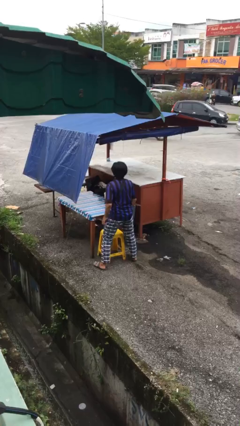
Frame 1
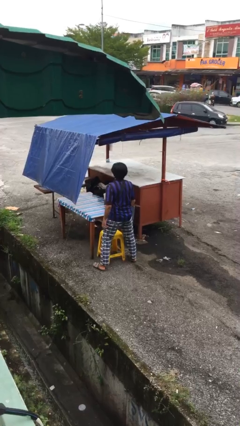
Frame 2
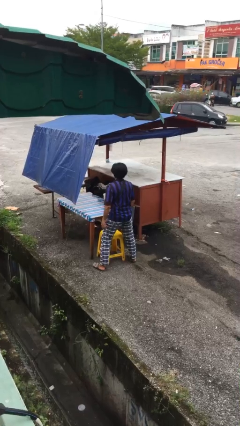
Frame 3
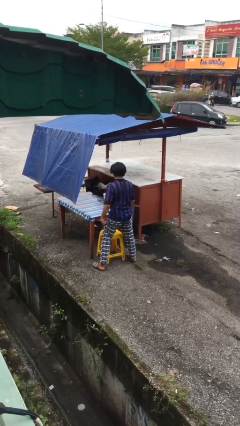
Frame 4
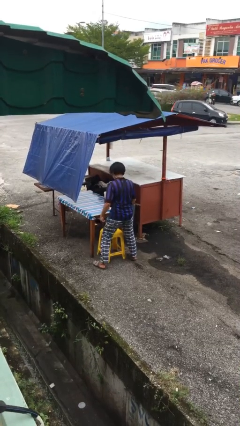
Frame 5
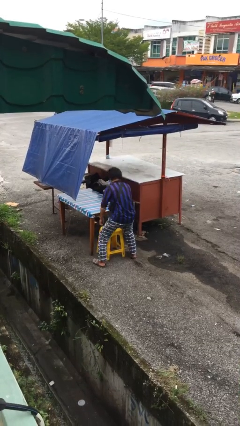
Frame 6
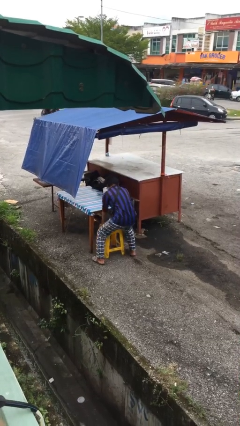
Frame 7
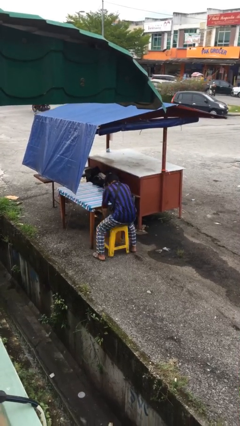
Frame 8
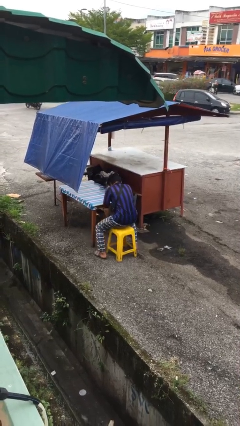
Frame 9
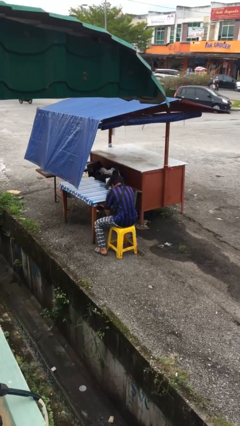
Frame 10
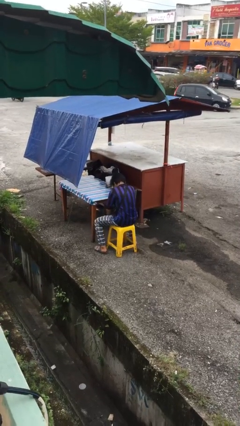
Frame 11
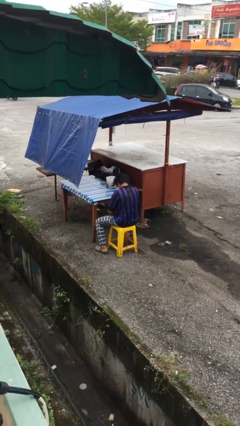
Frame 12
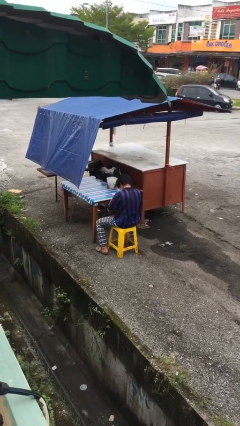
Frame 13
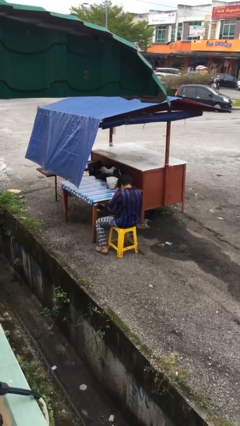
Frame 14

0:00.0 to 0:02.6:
person sits down

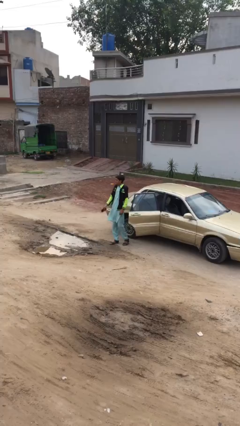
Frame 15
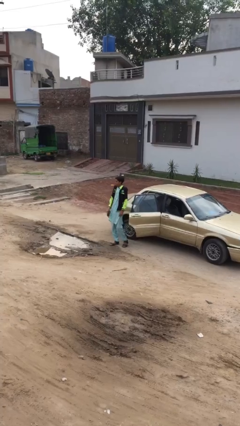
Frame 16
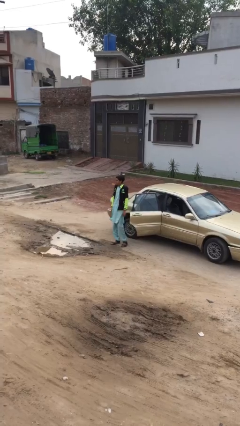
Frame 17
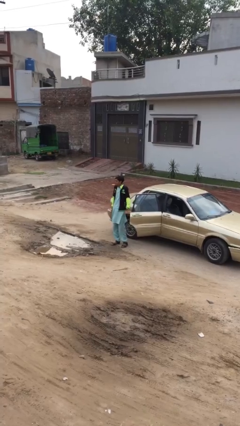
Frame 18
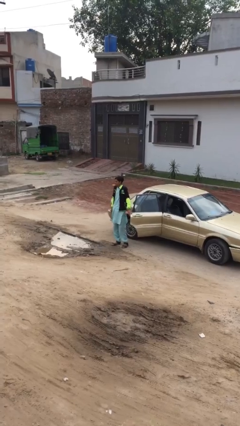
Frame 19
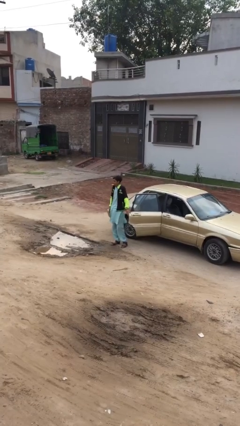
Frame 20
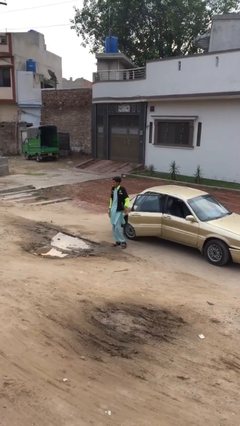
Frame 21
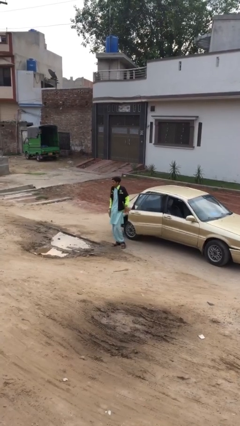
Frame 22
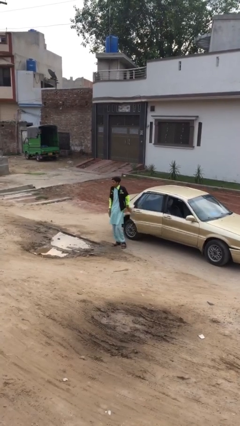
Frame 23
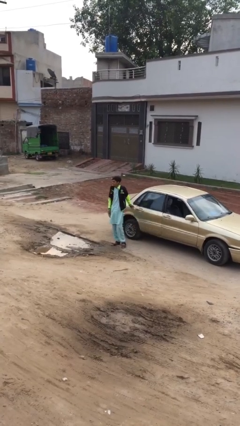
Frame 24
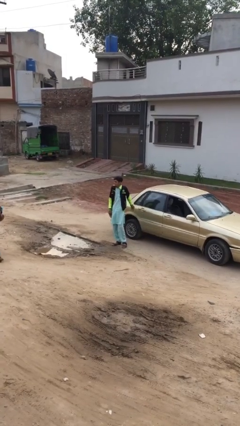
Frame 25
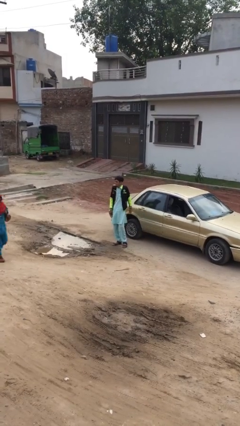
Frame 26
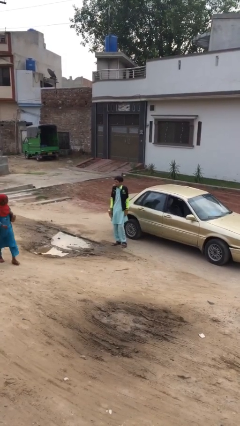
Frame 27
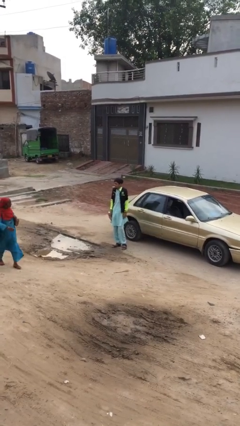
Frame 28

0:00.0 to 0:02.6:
person closes car door

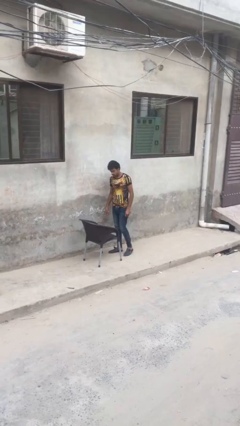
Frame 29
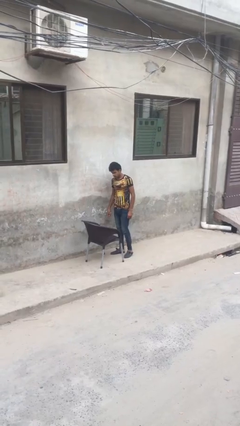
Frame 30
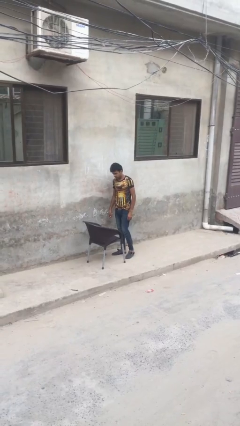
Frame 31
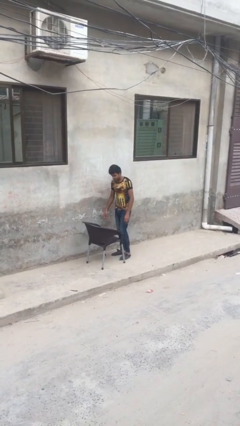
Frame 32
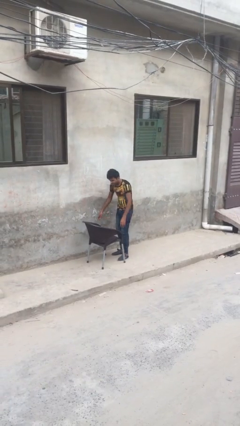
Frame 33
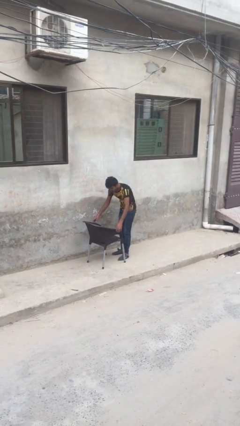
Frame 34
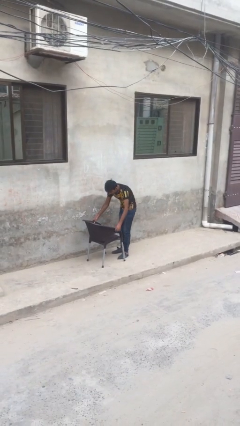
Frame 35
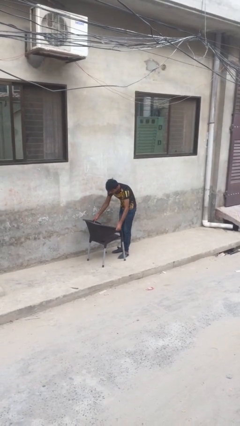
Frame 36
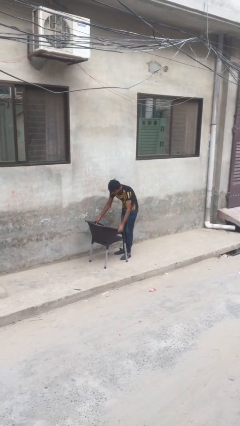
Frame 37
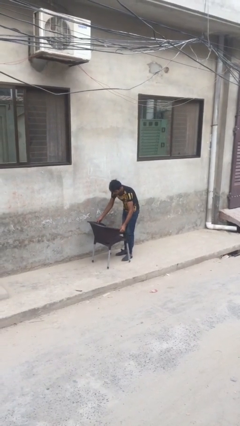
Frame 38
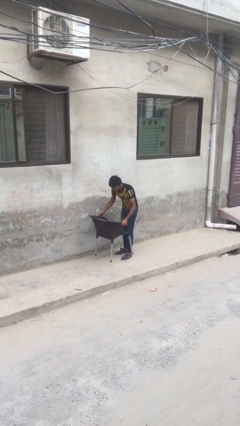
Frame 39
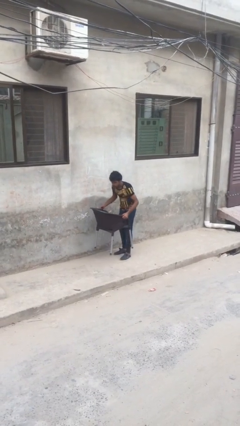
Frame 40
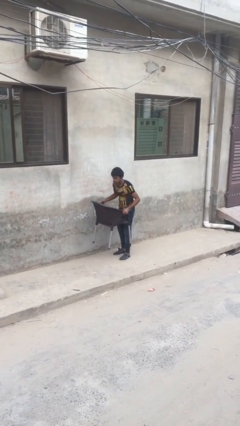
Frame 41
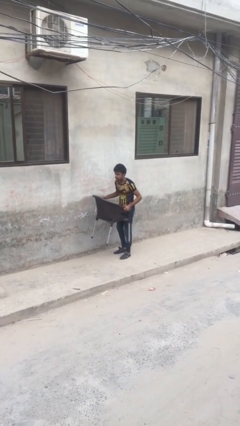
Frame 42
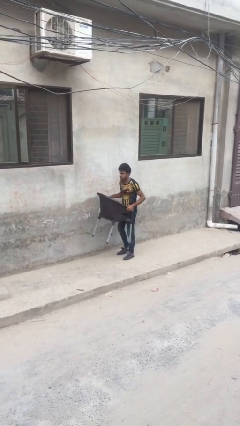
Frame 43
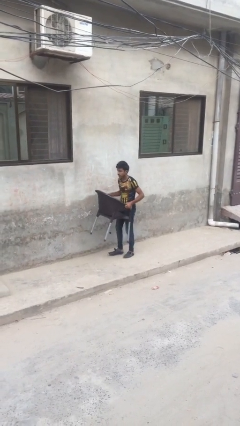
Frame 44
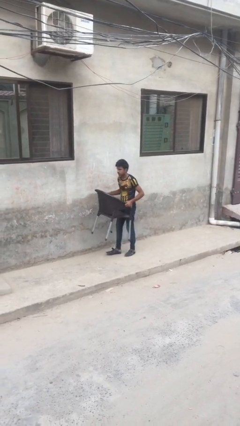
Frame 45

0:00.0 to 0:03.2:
person picks up object from floor

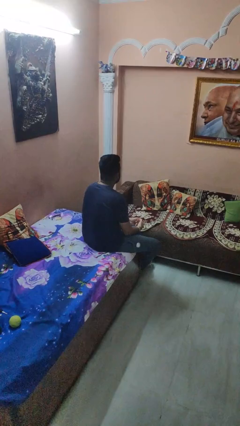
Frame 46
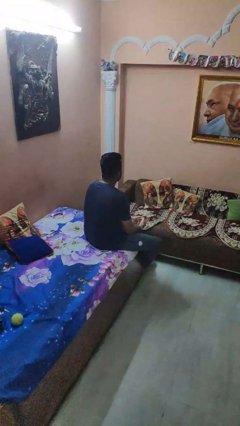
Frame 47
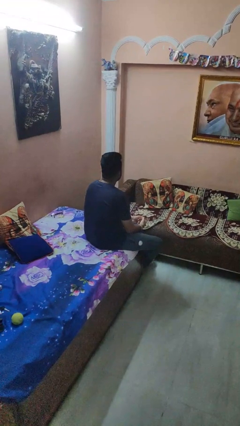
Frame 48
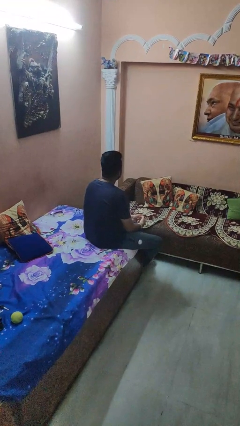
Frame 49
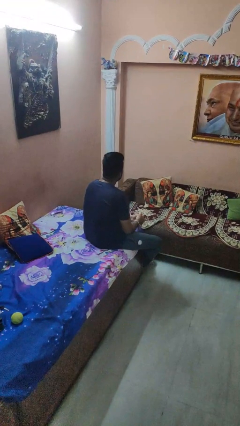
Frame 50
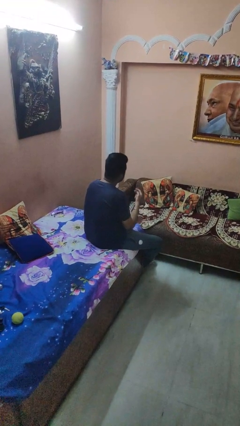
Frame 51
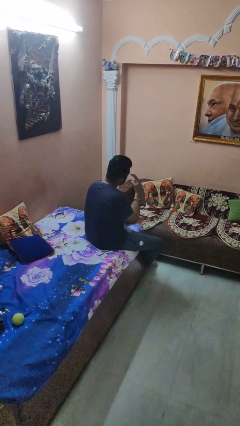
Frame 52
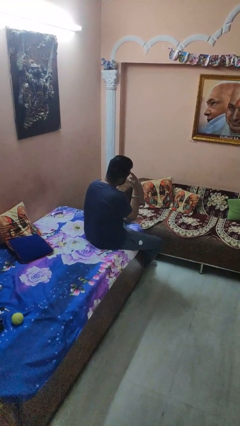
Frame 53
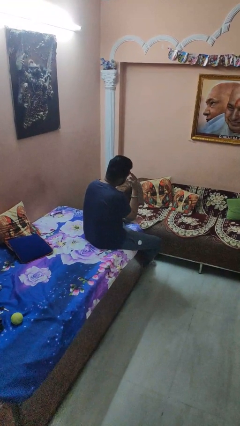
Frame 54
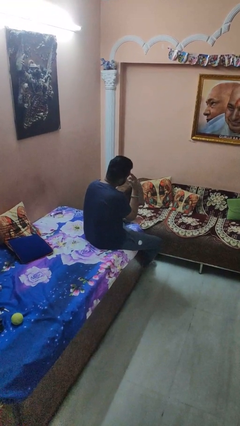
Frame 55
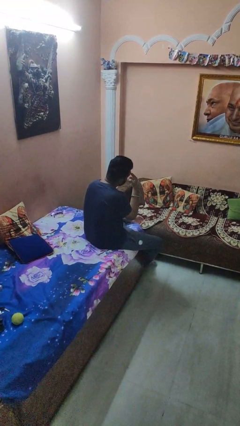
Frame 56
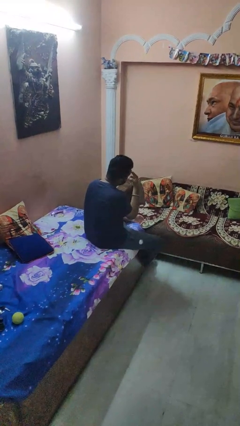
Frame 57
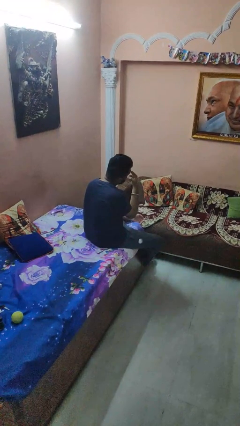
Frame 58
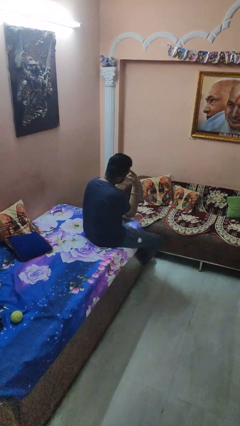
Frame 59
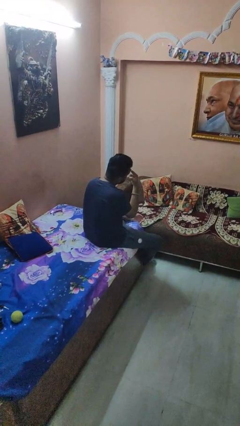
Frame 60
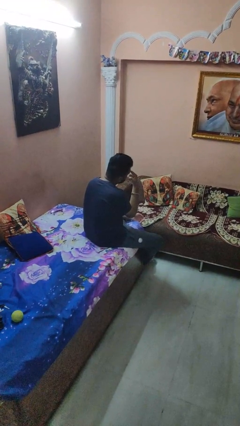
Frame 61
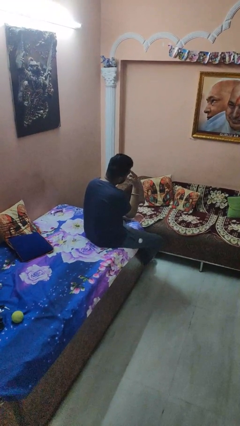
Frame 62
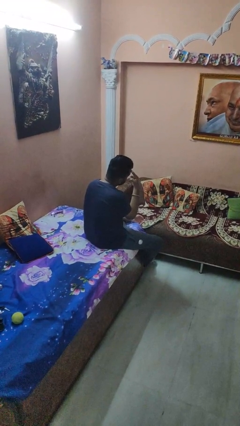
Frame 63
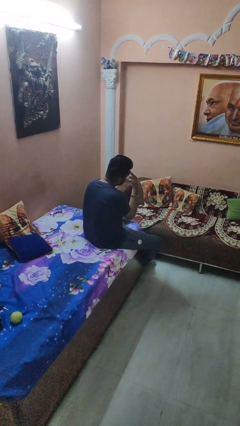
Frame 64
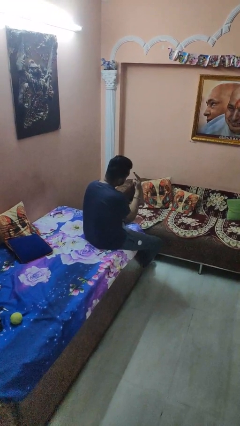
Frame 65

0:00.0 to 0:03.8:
person gestures watch closely

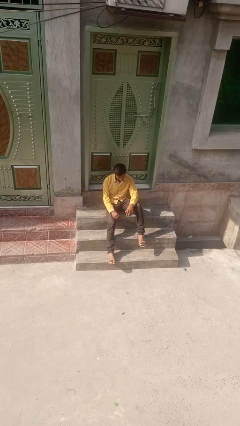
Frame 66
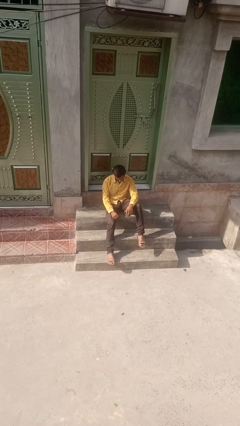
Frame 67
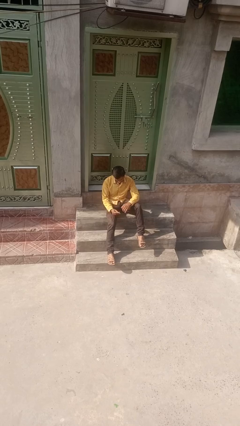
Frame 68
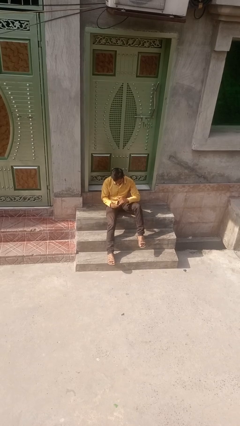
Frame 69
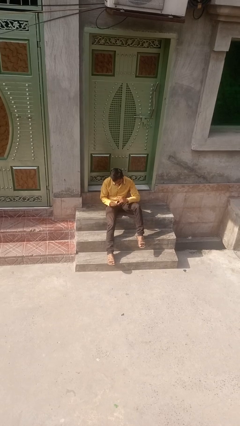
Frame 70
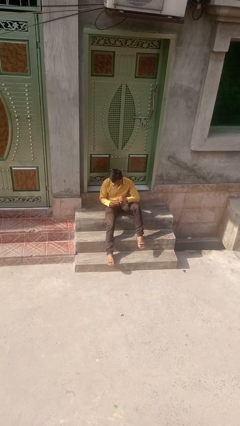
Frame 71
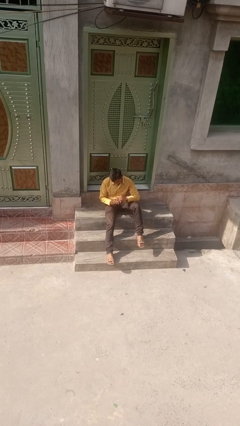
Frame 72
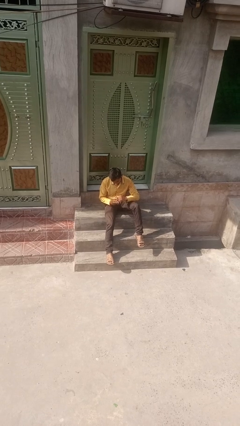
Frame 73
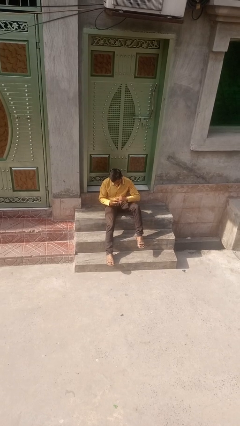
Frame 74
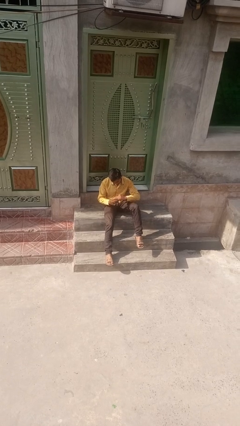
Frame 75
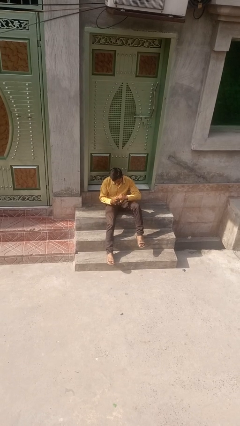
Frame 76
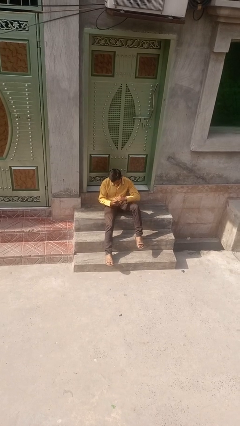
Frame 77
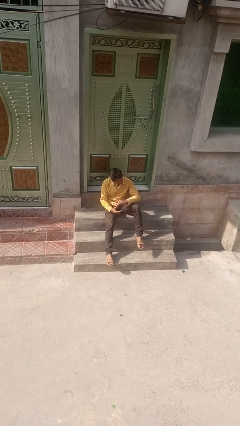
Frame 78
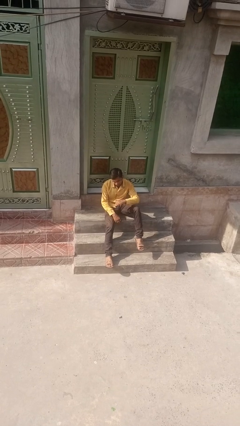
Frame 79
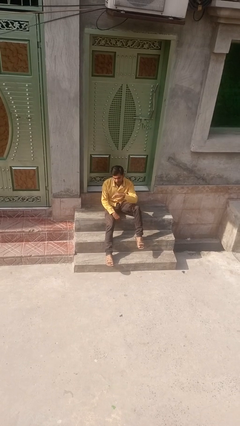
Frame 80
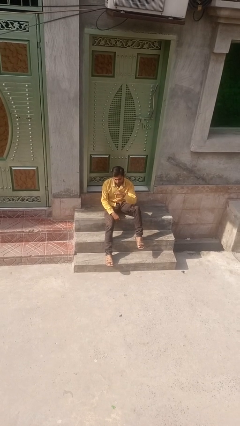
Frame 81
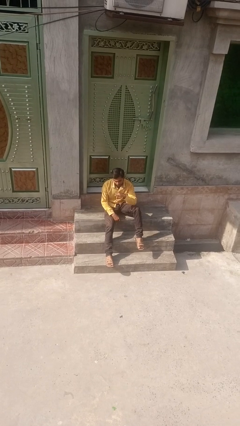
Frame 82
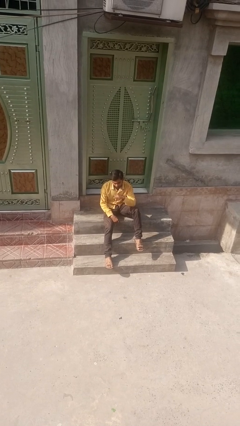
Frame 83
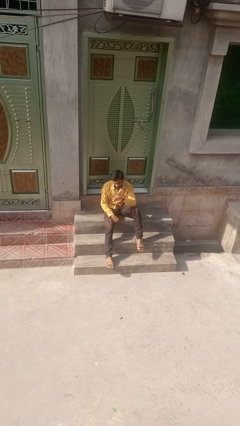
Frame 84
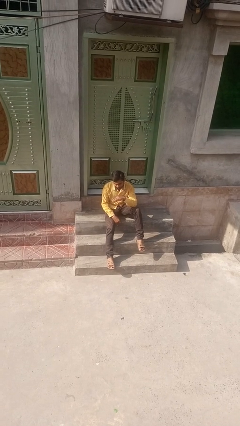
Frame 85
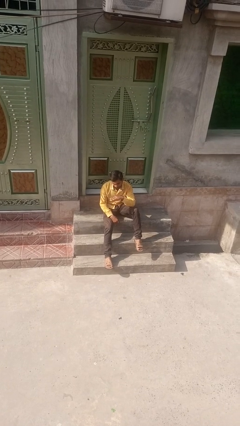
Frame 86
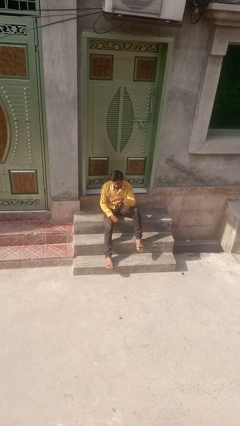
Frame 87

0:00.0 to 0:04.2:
person puts on ring

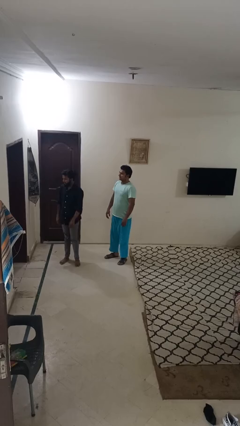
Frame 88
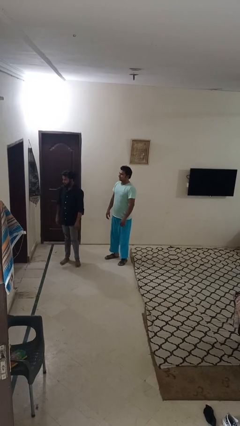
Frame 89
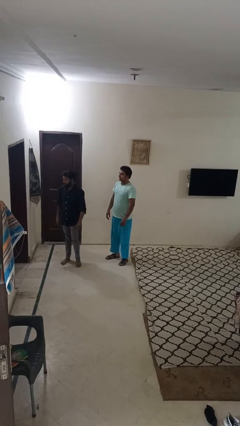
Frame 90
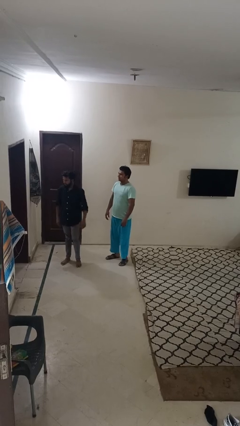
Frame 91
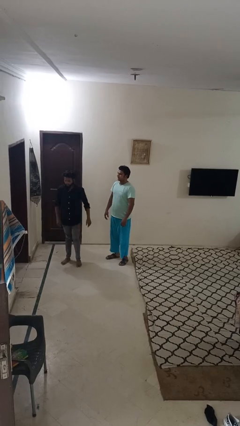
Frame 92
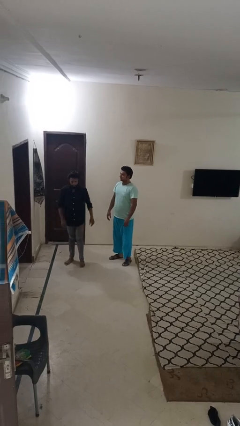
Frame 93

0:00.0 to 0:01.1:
person grabs person by forearm
